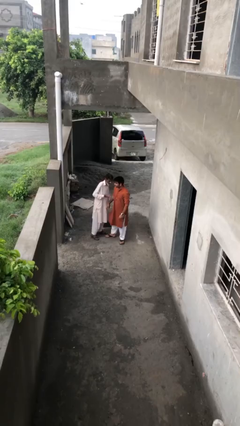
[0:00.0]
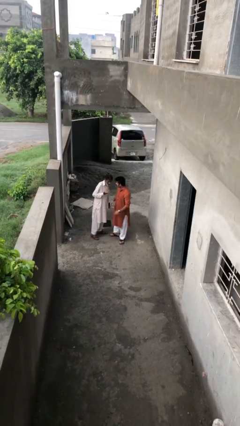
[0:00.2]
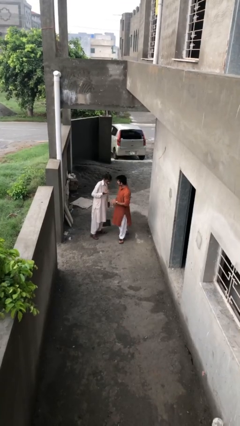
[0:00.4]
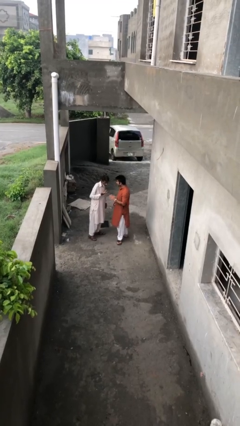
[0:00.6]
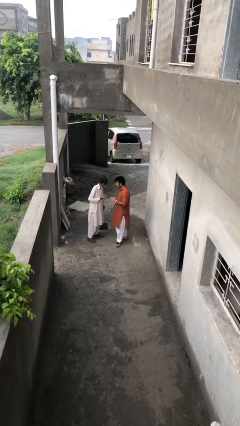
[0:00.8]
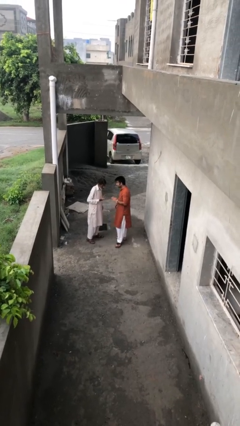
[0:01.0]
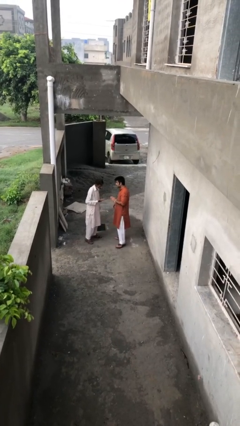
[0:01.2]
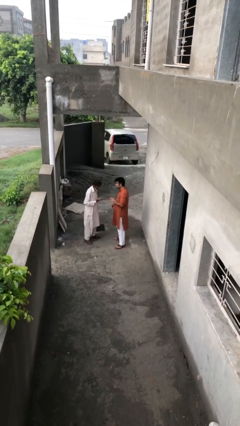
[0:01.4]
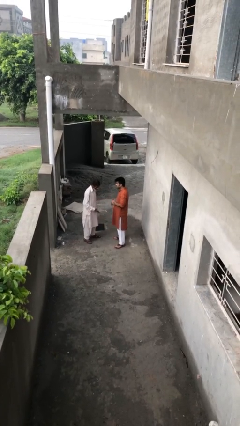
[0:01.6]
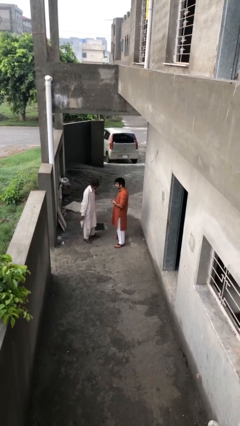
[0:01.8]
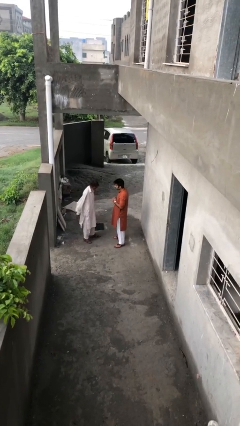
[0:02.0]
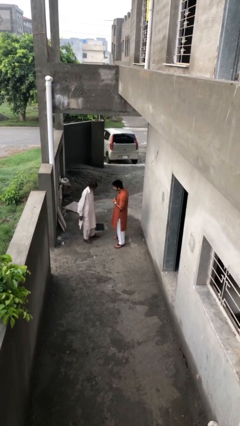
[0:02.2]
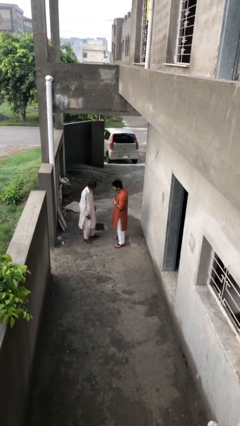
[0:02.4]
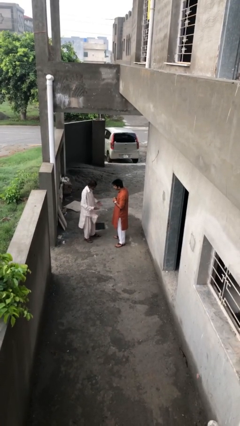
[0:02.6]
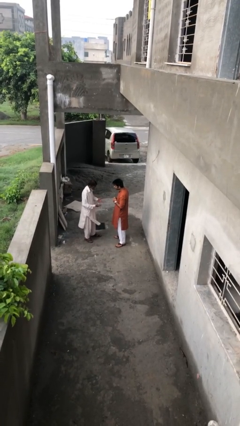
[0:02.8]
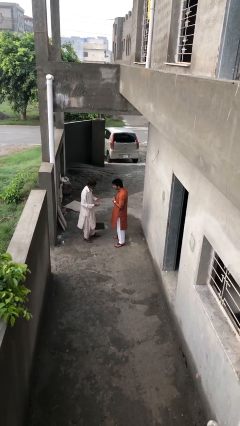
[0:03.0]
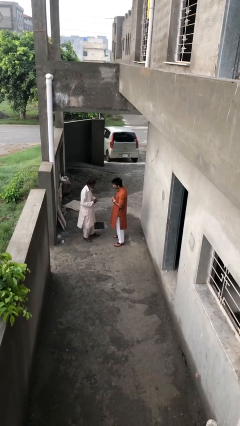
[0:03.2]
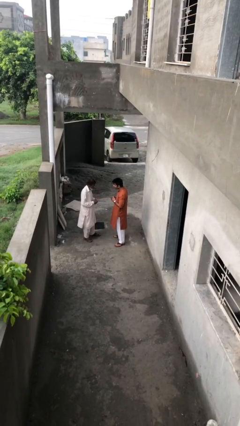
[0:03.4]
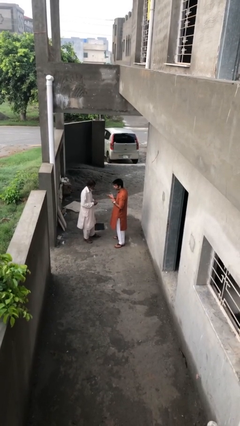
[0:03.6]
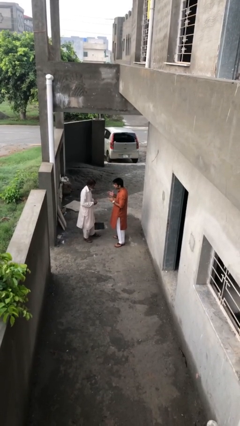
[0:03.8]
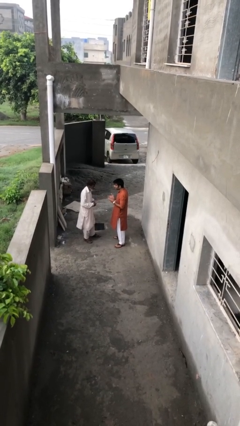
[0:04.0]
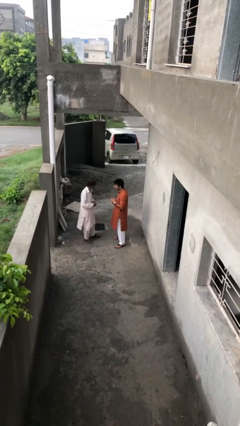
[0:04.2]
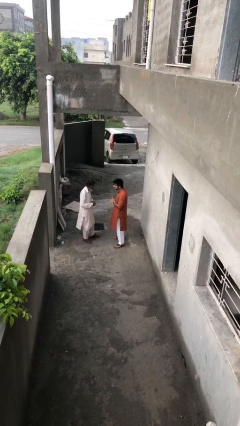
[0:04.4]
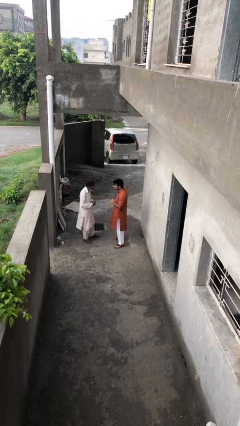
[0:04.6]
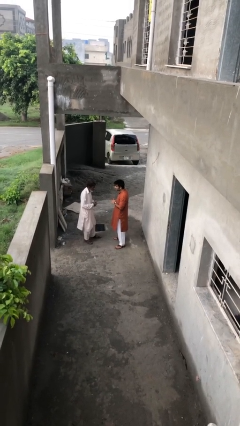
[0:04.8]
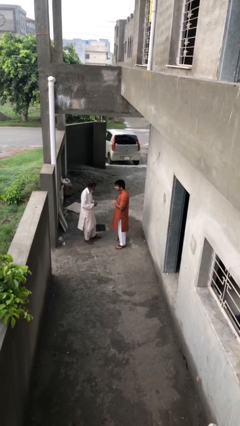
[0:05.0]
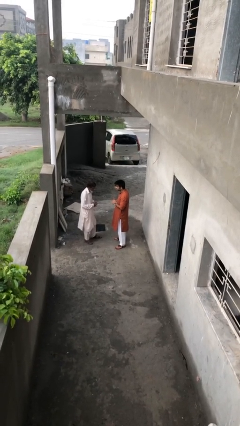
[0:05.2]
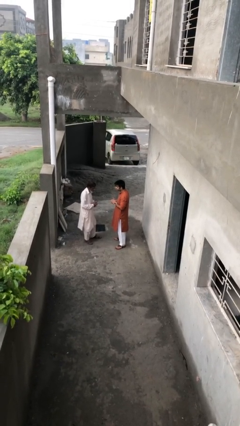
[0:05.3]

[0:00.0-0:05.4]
person talks to person

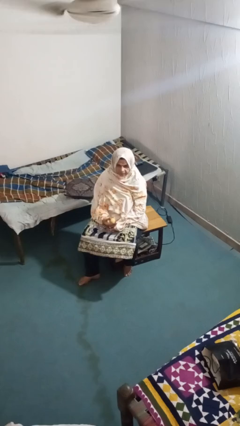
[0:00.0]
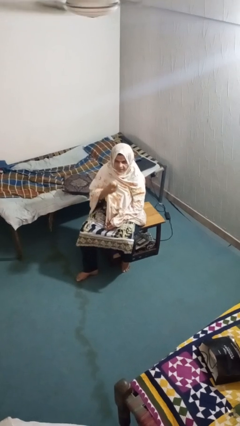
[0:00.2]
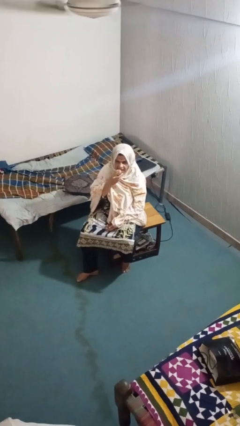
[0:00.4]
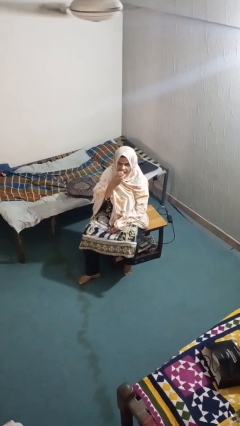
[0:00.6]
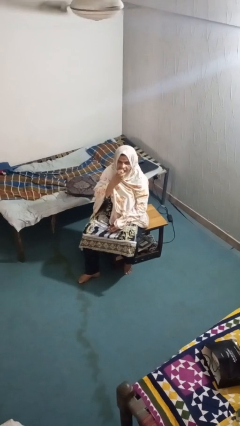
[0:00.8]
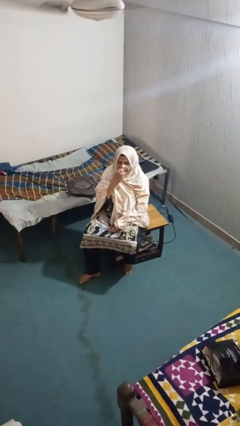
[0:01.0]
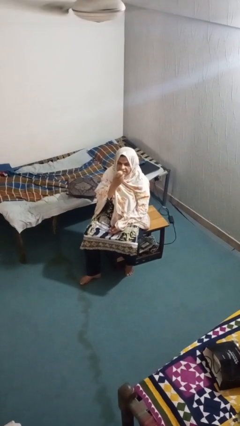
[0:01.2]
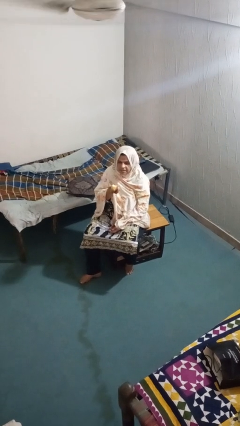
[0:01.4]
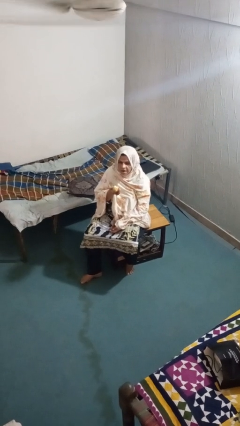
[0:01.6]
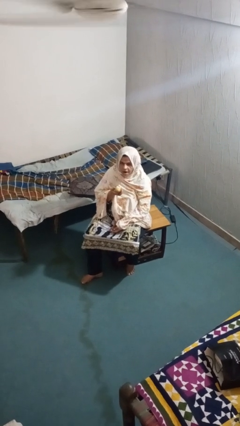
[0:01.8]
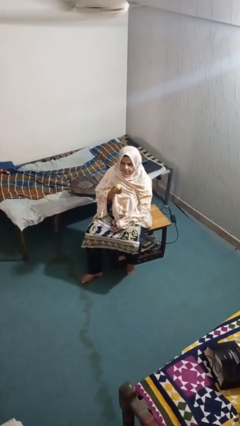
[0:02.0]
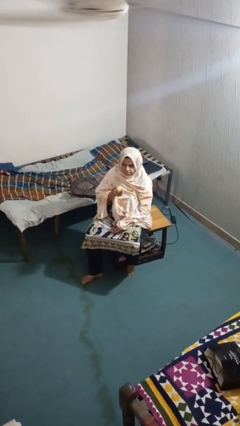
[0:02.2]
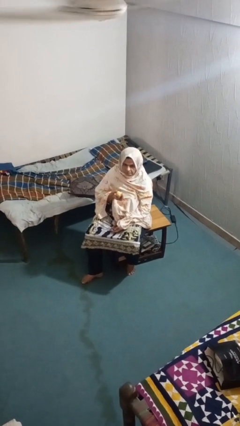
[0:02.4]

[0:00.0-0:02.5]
person eats apple

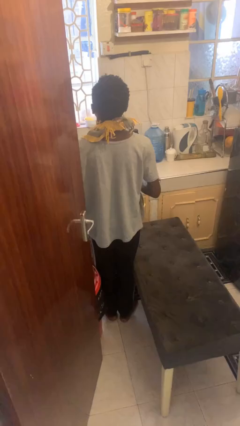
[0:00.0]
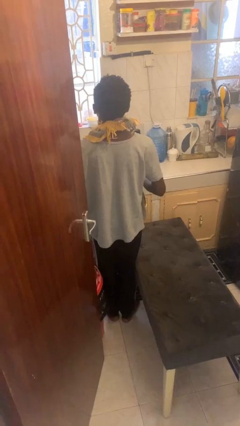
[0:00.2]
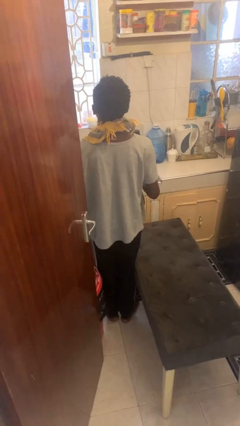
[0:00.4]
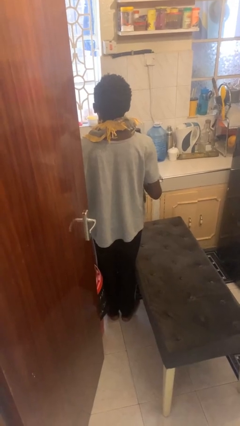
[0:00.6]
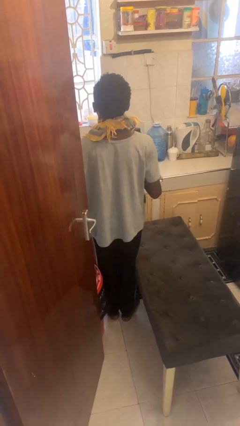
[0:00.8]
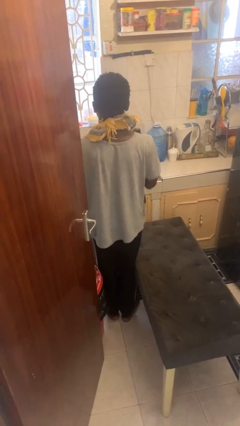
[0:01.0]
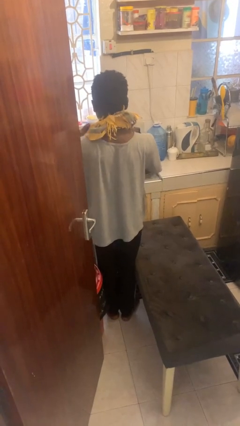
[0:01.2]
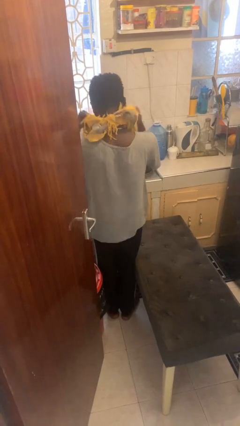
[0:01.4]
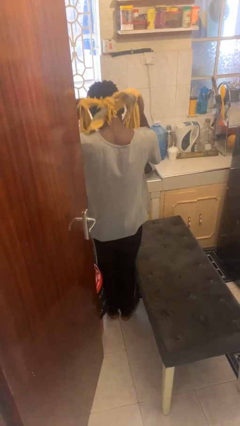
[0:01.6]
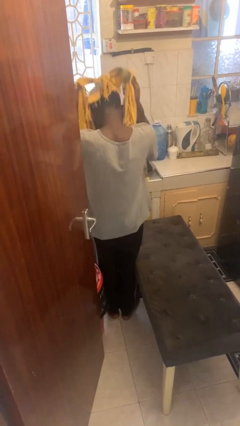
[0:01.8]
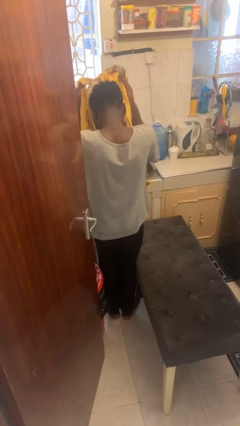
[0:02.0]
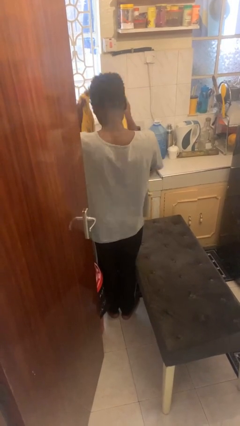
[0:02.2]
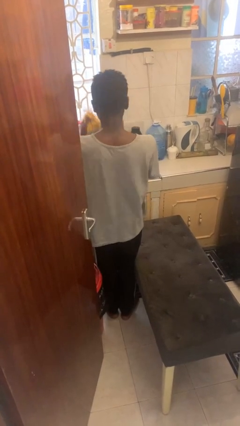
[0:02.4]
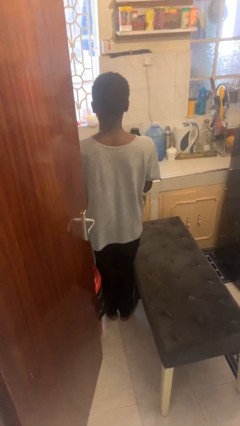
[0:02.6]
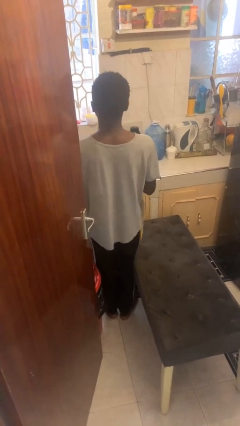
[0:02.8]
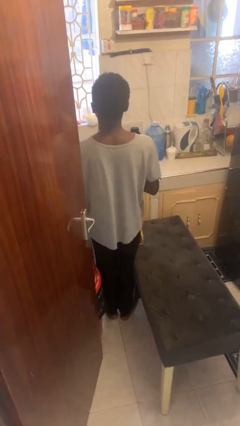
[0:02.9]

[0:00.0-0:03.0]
person takes off apron

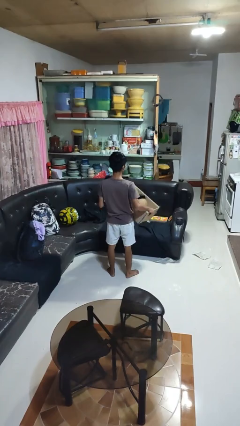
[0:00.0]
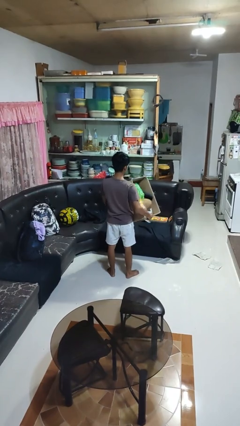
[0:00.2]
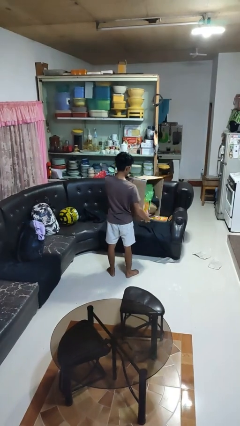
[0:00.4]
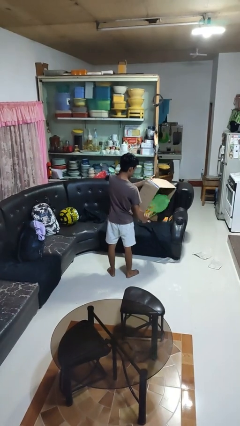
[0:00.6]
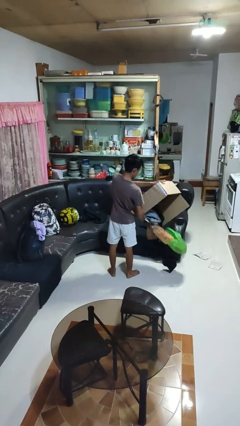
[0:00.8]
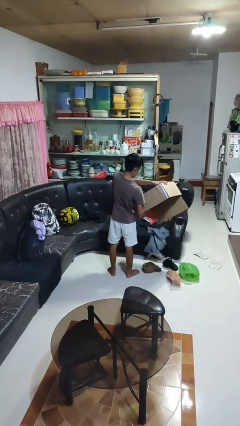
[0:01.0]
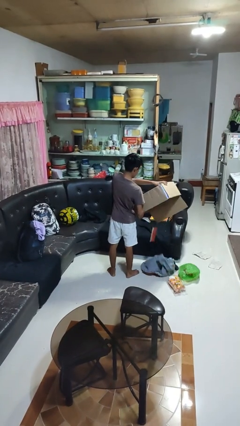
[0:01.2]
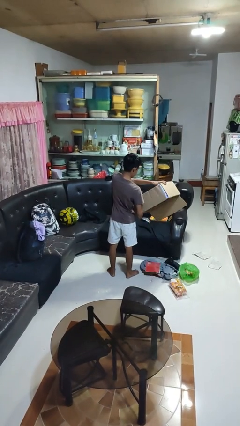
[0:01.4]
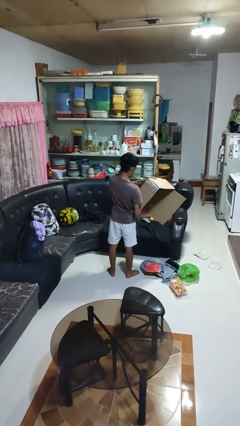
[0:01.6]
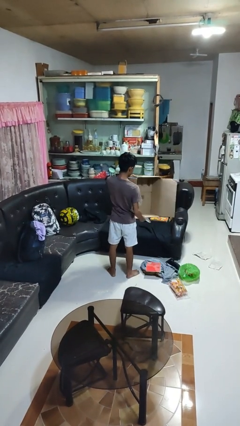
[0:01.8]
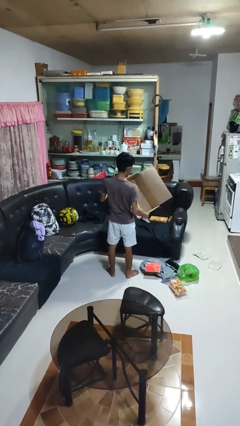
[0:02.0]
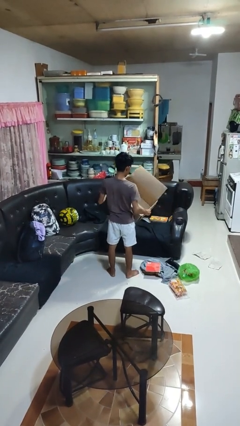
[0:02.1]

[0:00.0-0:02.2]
person unloads box onto floor

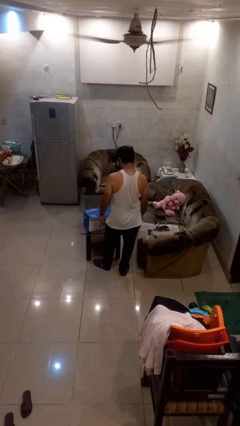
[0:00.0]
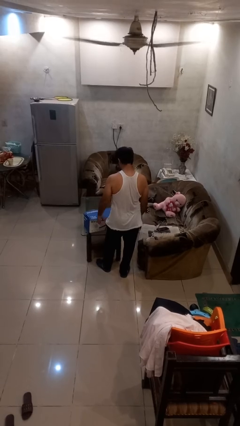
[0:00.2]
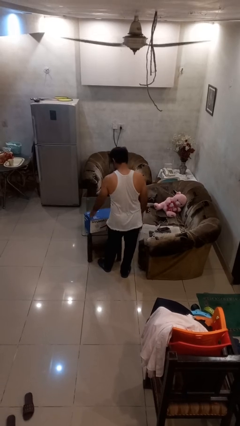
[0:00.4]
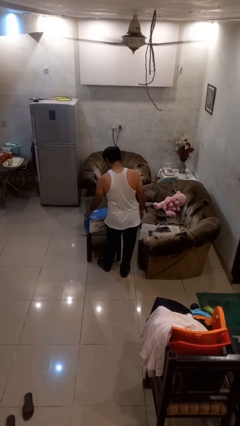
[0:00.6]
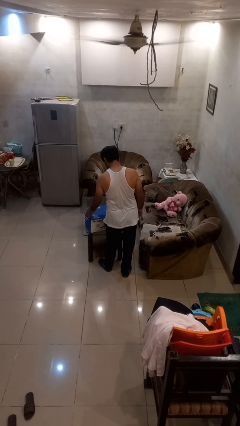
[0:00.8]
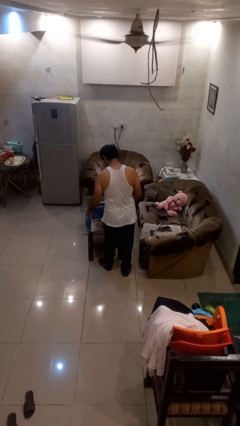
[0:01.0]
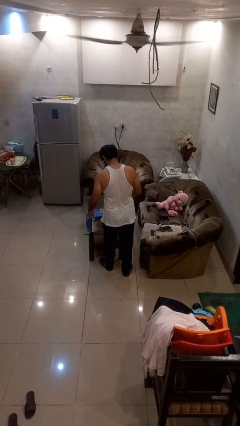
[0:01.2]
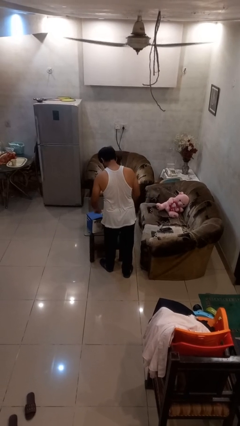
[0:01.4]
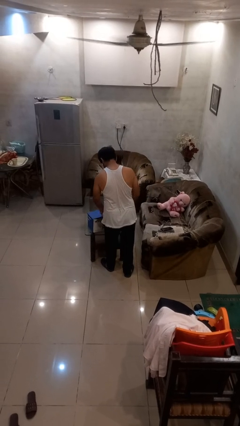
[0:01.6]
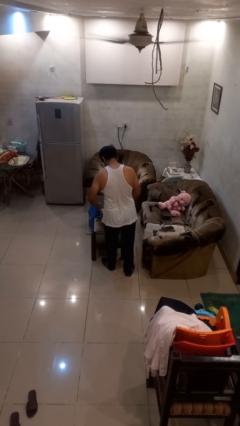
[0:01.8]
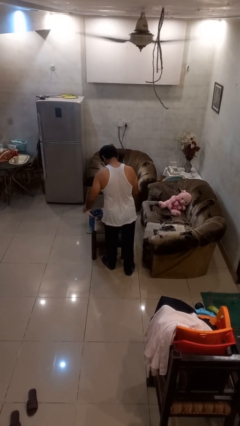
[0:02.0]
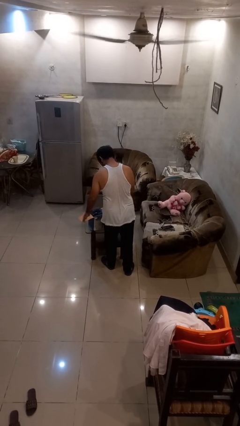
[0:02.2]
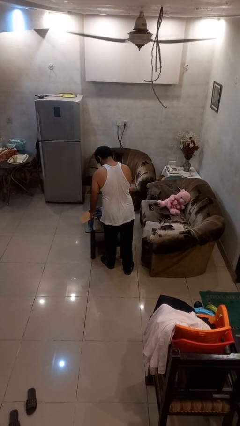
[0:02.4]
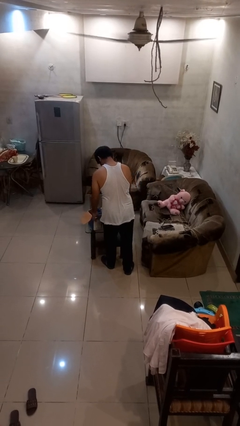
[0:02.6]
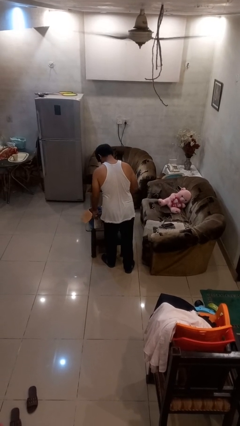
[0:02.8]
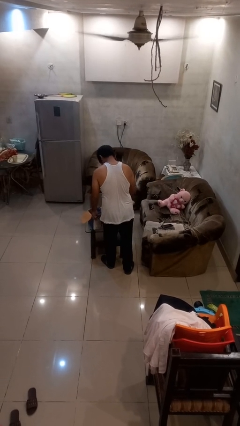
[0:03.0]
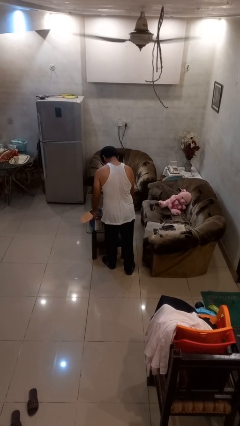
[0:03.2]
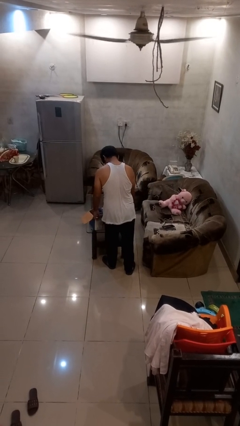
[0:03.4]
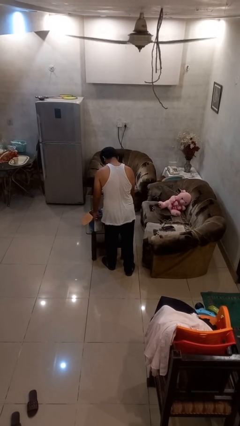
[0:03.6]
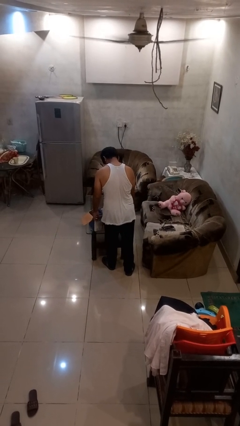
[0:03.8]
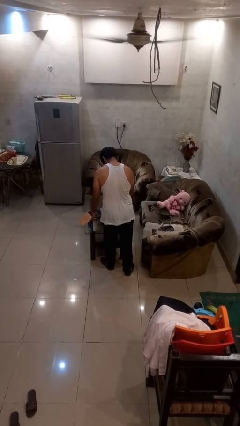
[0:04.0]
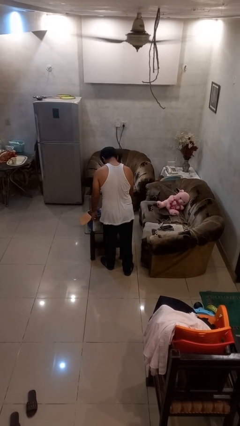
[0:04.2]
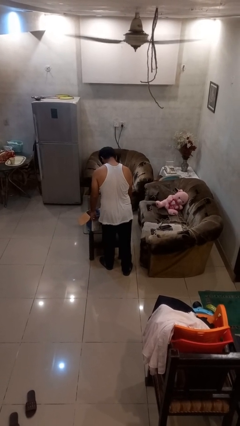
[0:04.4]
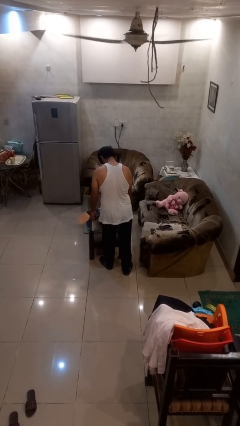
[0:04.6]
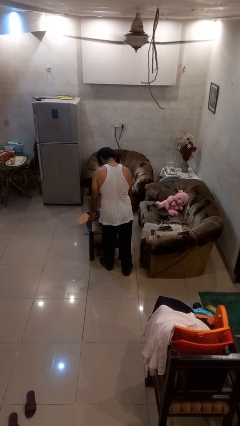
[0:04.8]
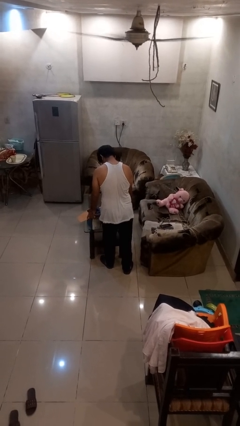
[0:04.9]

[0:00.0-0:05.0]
person opens box
